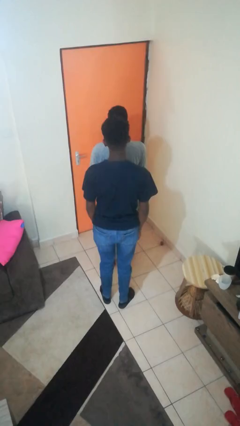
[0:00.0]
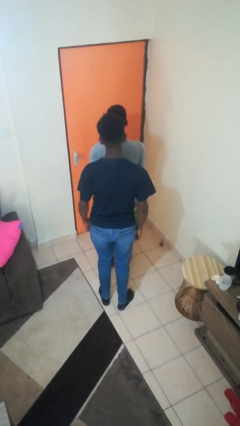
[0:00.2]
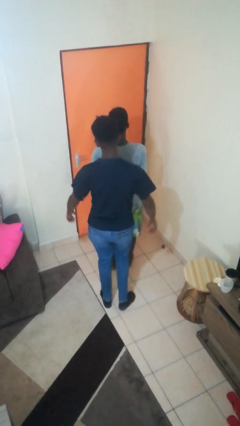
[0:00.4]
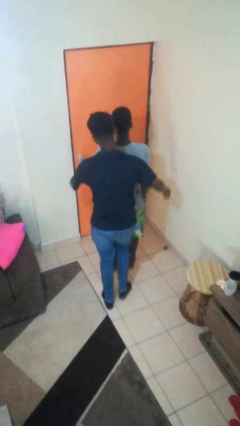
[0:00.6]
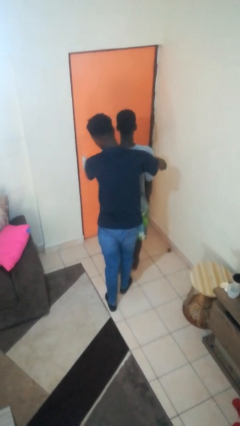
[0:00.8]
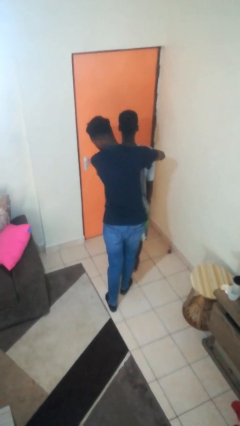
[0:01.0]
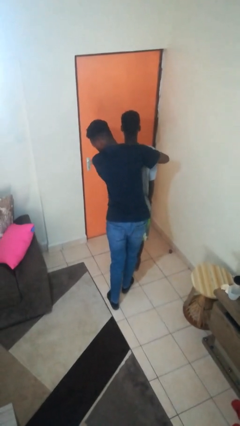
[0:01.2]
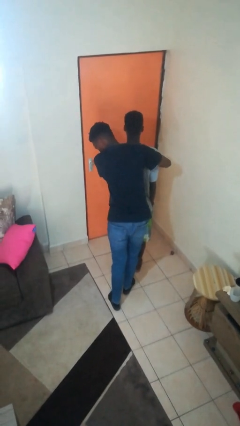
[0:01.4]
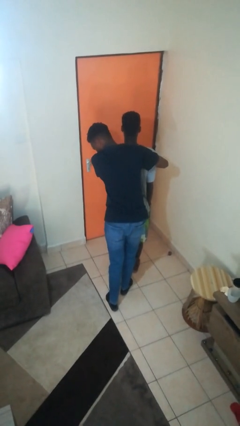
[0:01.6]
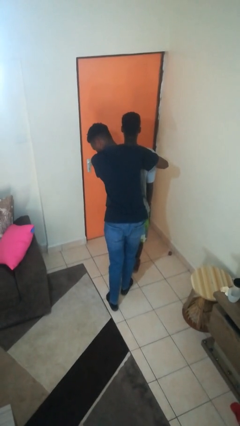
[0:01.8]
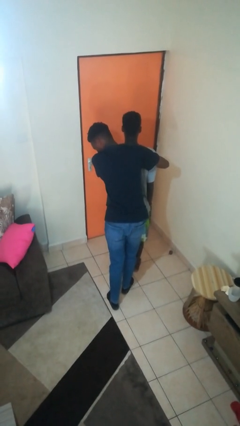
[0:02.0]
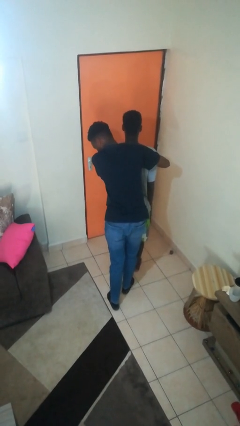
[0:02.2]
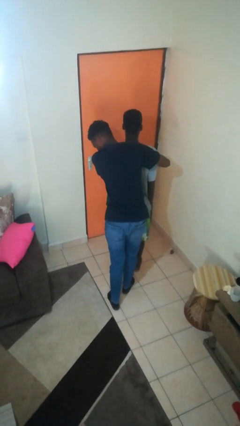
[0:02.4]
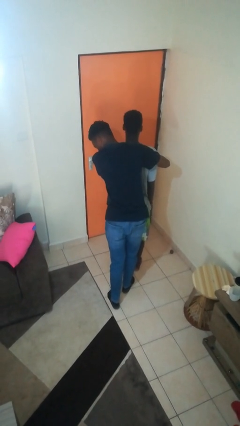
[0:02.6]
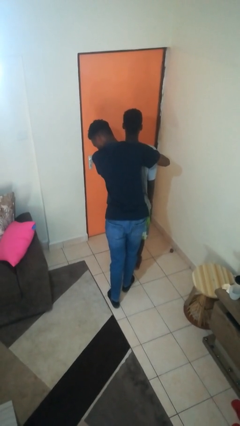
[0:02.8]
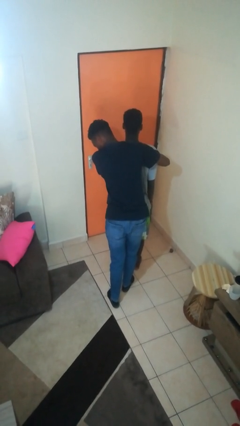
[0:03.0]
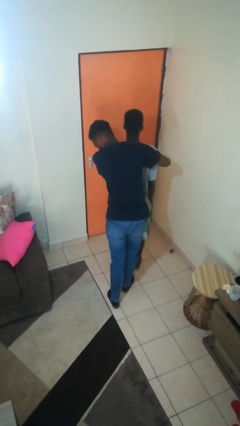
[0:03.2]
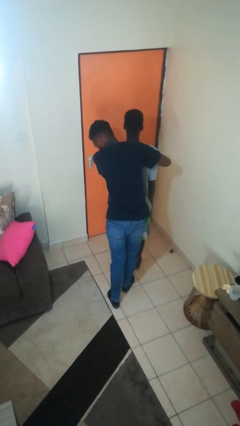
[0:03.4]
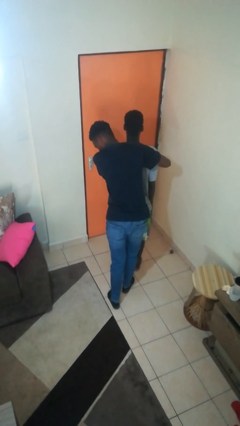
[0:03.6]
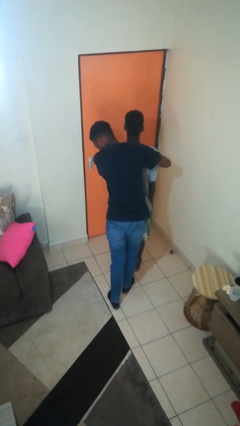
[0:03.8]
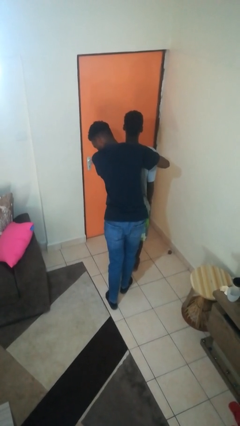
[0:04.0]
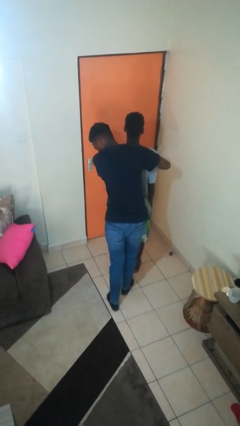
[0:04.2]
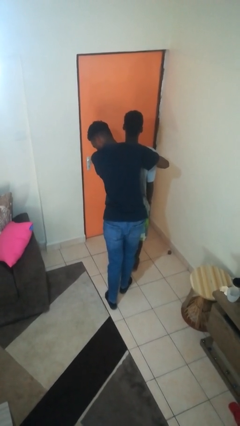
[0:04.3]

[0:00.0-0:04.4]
person hugs person from behind

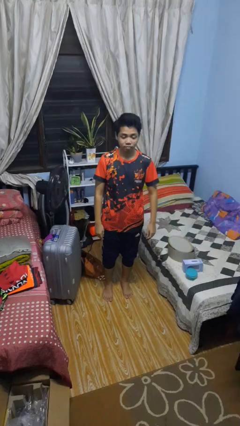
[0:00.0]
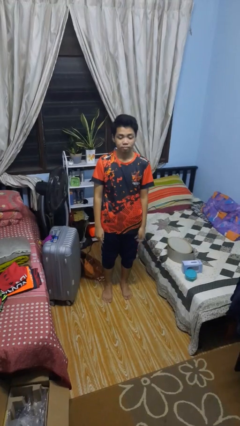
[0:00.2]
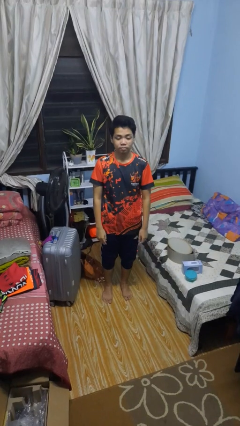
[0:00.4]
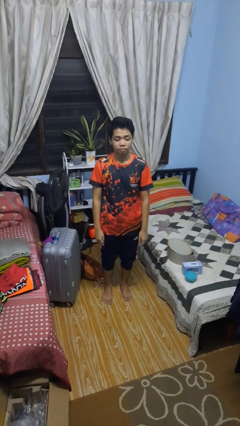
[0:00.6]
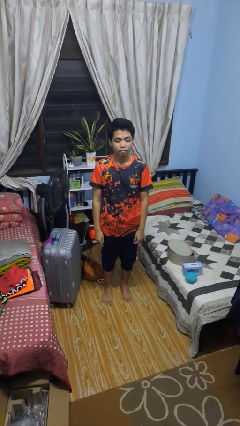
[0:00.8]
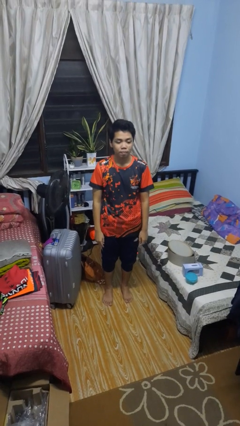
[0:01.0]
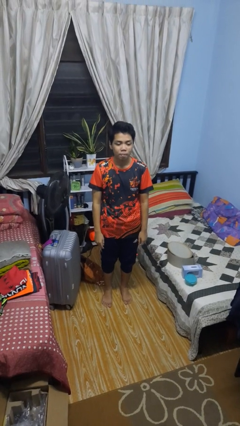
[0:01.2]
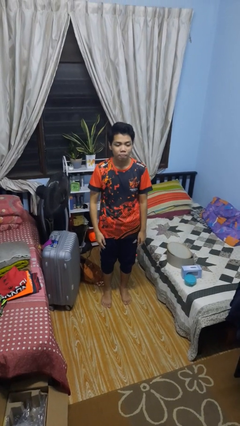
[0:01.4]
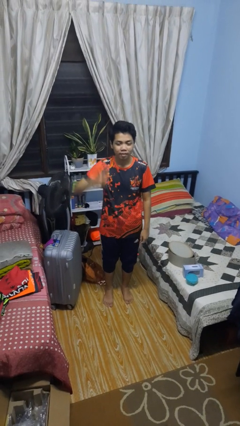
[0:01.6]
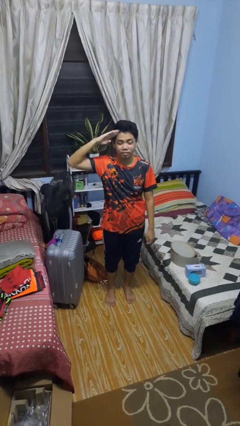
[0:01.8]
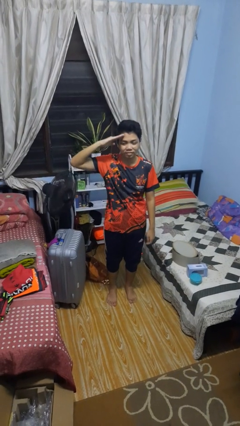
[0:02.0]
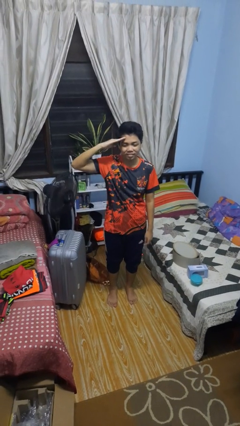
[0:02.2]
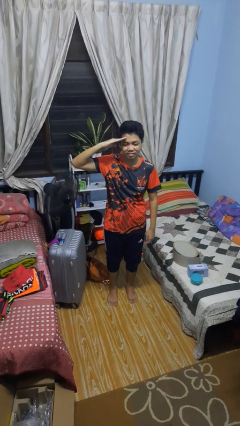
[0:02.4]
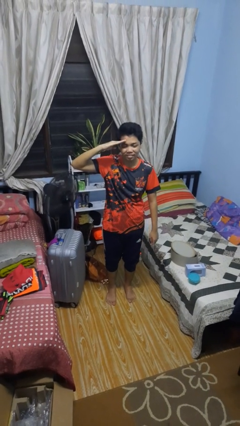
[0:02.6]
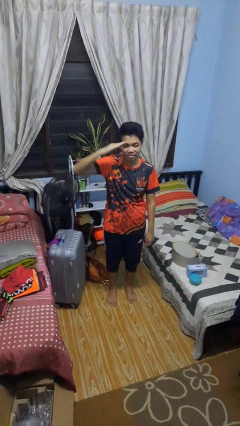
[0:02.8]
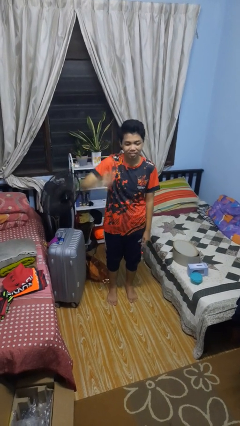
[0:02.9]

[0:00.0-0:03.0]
person salutes

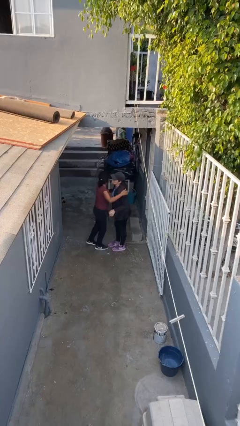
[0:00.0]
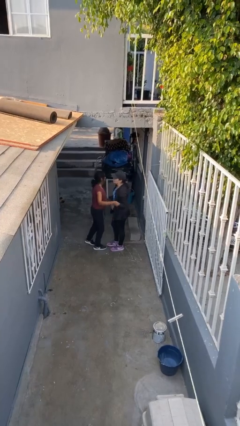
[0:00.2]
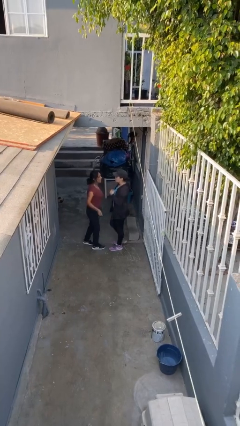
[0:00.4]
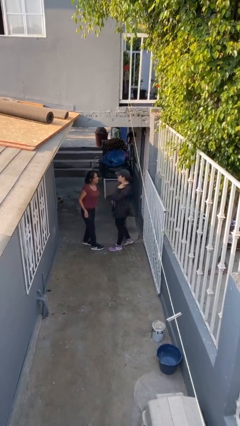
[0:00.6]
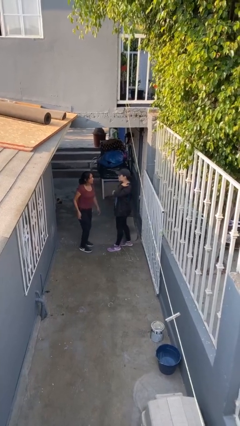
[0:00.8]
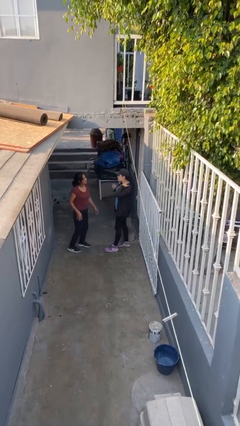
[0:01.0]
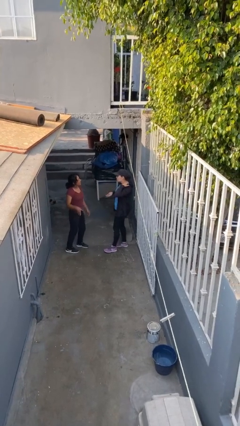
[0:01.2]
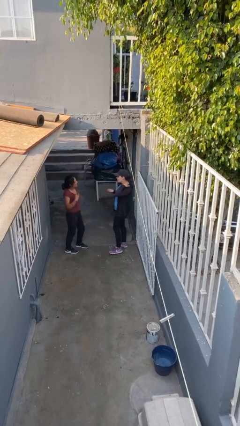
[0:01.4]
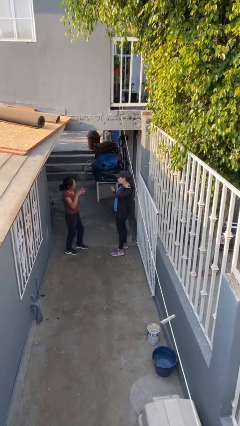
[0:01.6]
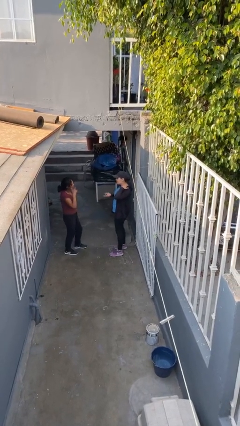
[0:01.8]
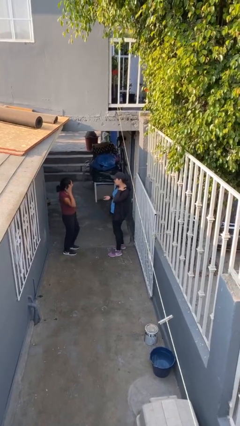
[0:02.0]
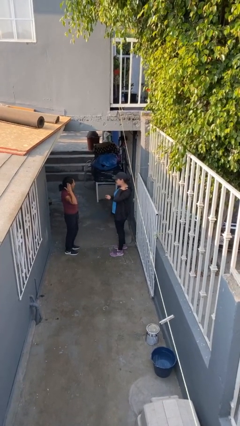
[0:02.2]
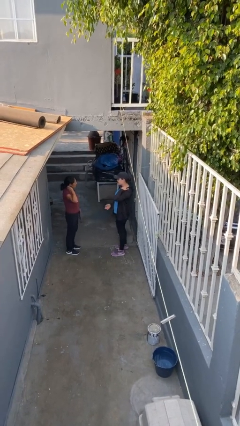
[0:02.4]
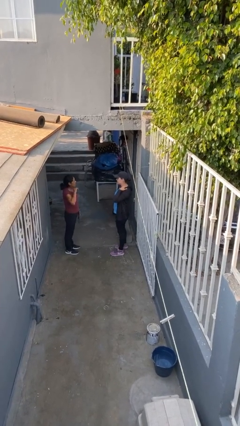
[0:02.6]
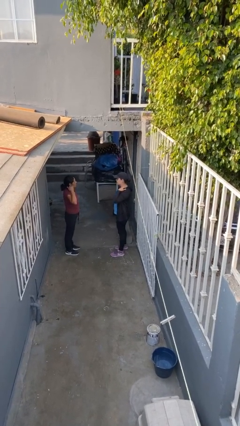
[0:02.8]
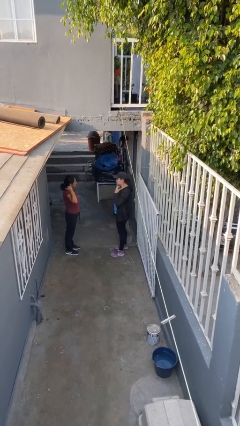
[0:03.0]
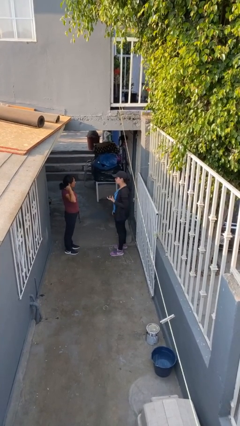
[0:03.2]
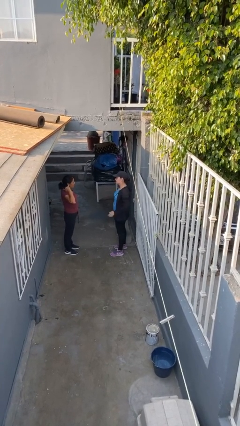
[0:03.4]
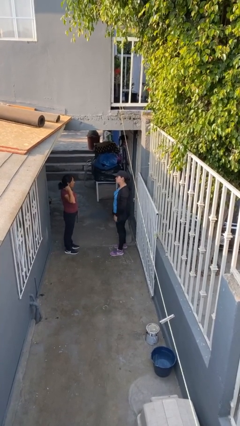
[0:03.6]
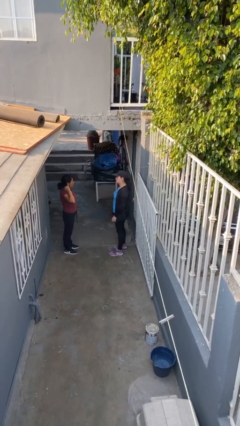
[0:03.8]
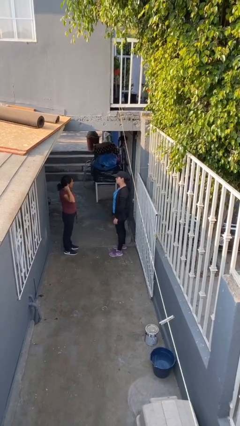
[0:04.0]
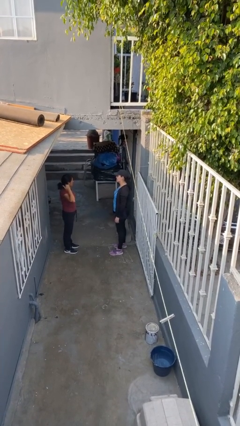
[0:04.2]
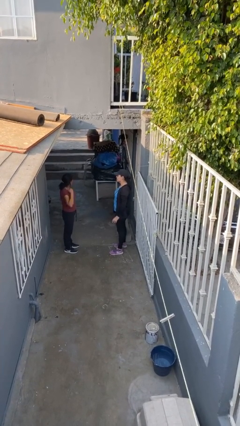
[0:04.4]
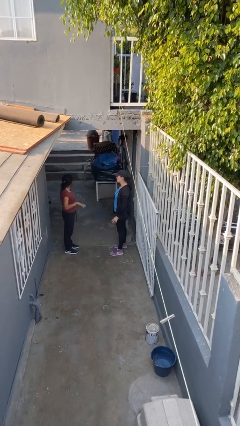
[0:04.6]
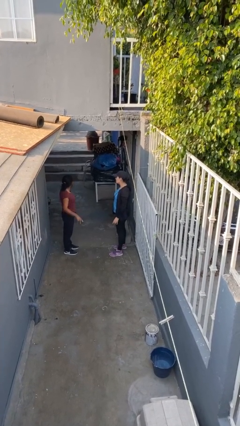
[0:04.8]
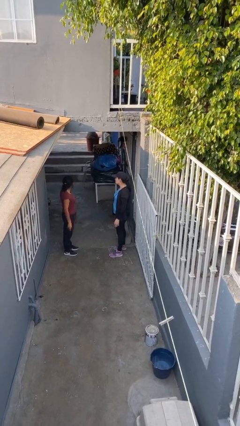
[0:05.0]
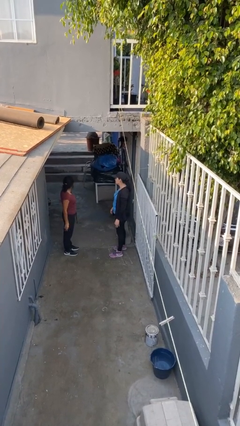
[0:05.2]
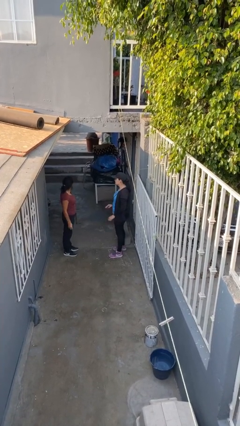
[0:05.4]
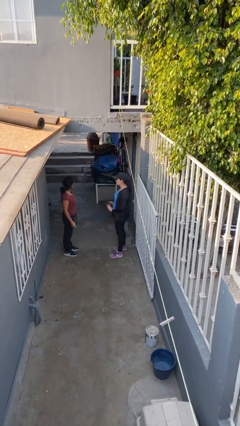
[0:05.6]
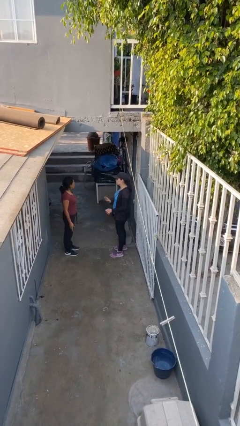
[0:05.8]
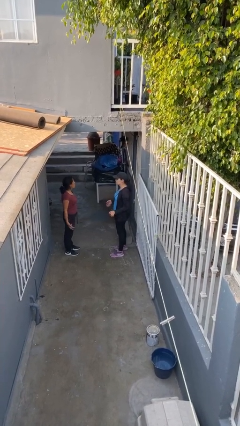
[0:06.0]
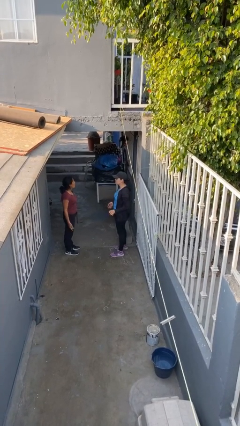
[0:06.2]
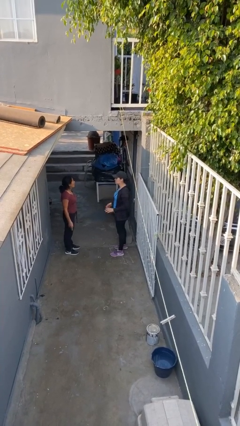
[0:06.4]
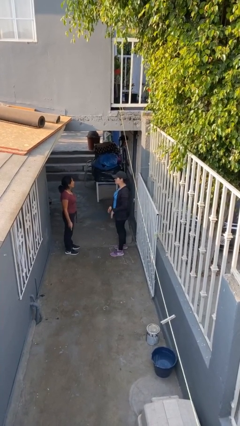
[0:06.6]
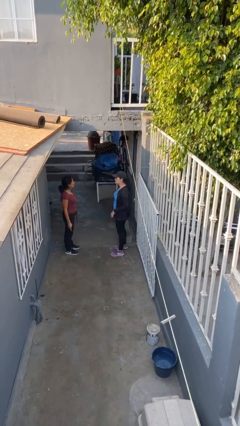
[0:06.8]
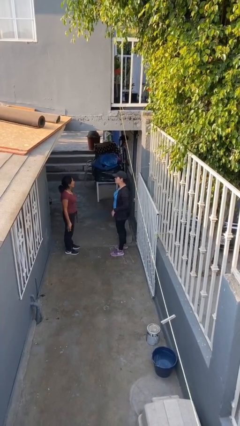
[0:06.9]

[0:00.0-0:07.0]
person talks to person

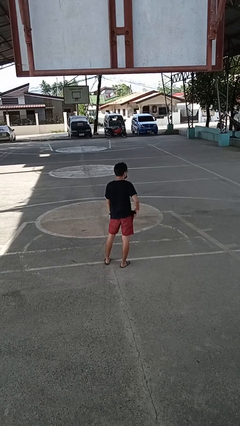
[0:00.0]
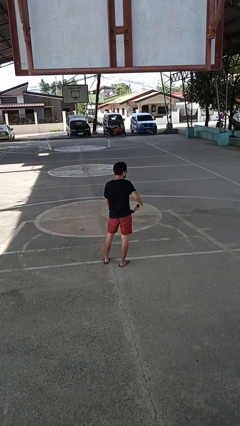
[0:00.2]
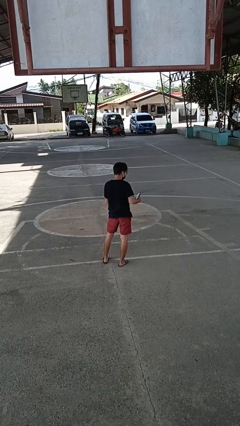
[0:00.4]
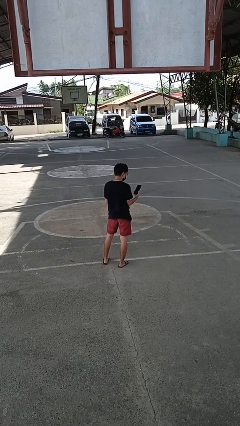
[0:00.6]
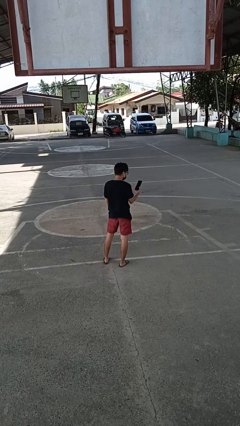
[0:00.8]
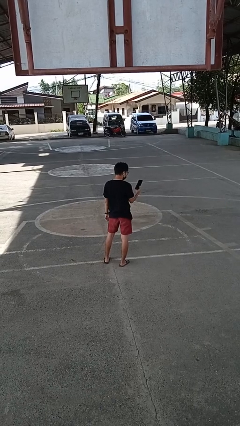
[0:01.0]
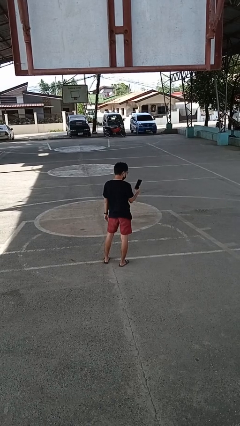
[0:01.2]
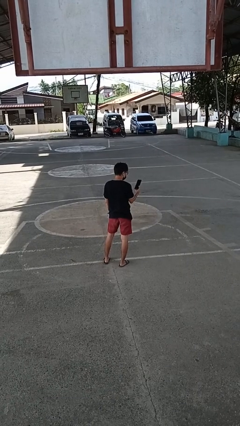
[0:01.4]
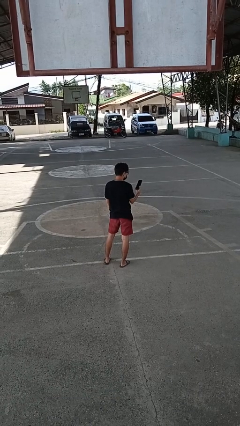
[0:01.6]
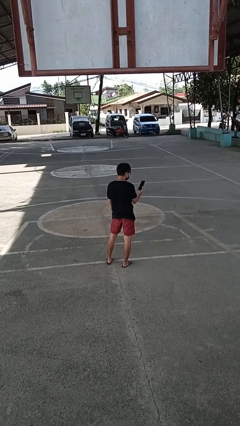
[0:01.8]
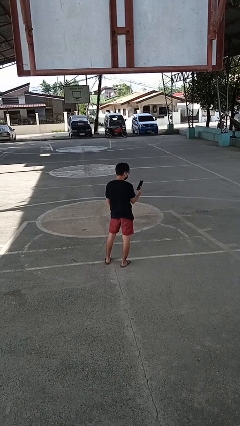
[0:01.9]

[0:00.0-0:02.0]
person takes phone from pocket

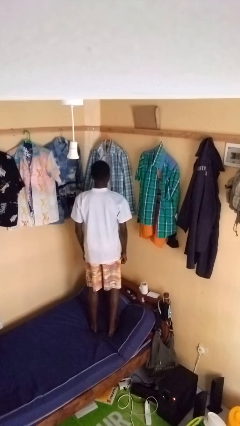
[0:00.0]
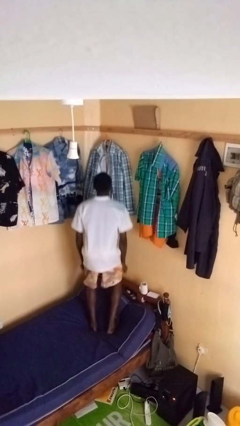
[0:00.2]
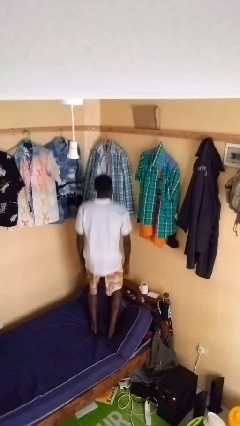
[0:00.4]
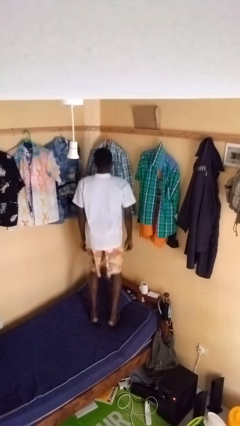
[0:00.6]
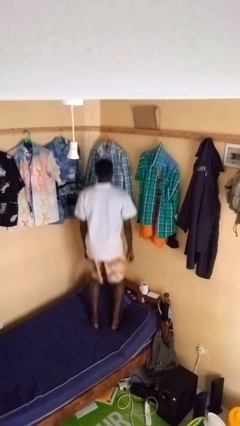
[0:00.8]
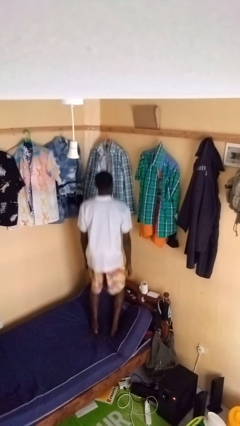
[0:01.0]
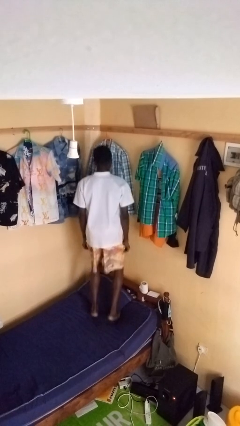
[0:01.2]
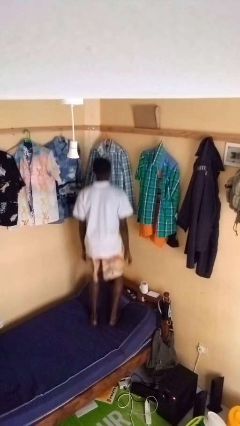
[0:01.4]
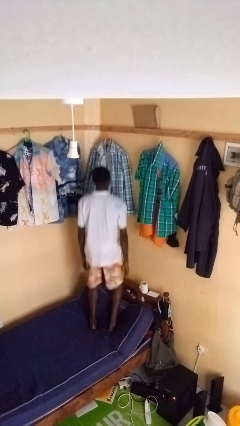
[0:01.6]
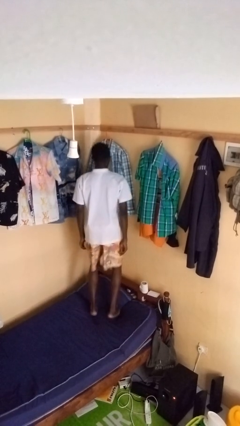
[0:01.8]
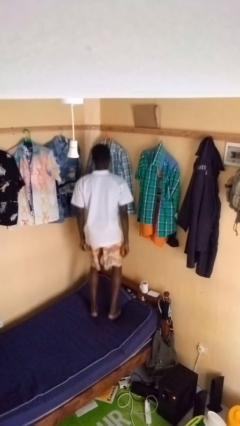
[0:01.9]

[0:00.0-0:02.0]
person jumps on bed
